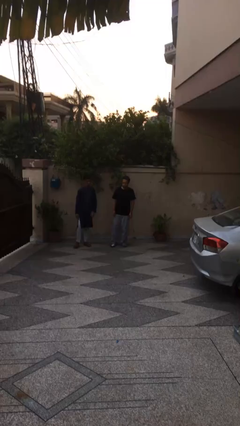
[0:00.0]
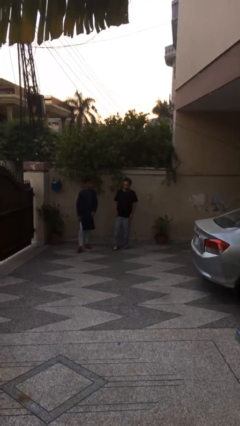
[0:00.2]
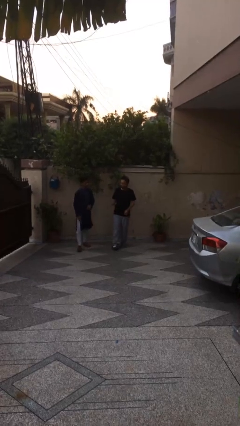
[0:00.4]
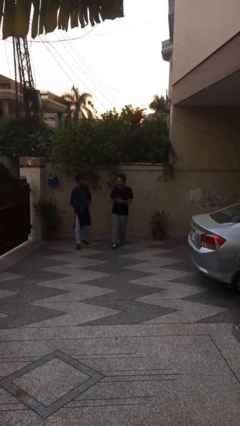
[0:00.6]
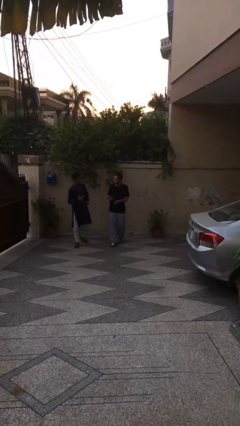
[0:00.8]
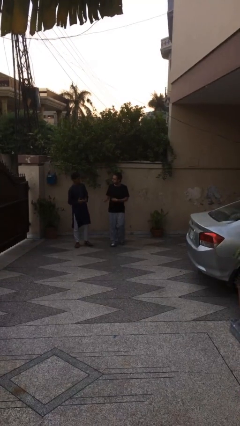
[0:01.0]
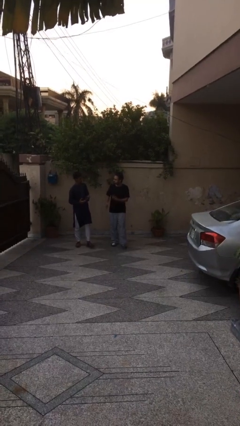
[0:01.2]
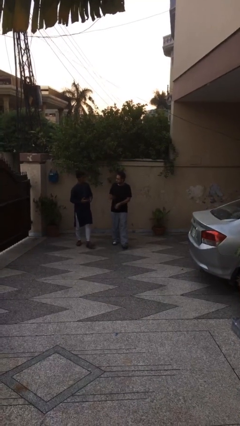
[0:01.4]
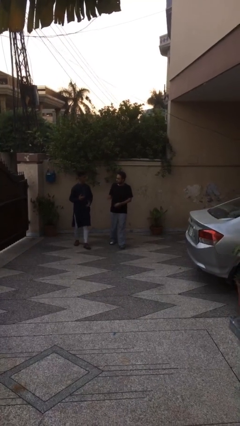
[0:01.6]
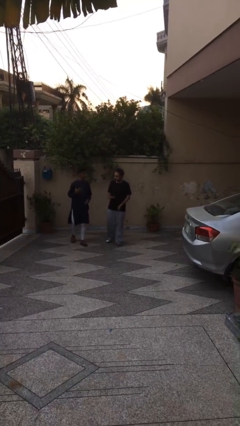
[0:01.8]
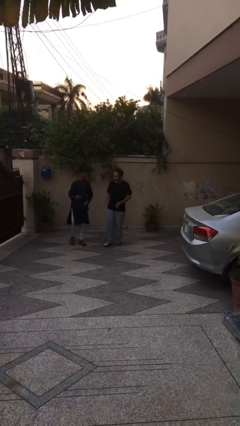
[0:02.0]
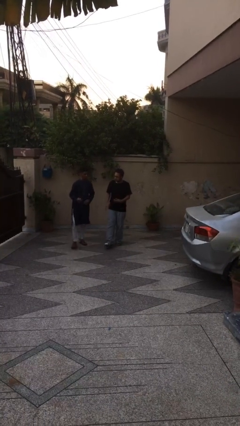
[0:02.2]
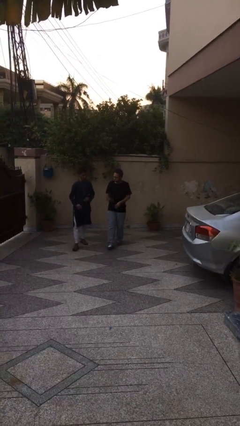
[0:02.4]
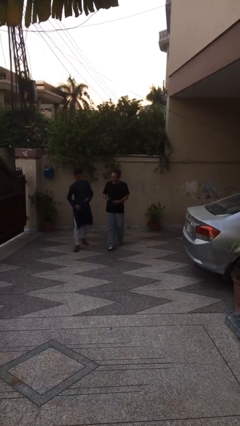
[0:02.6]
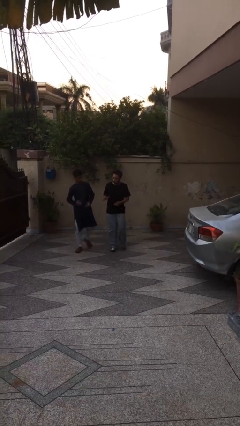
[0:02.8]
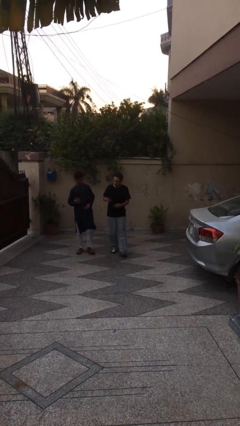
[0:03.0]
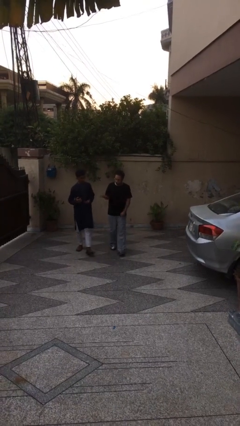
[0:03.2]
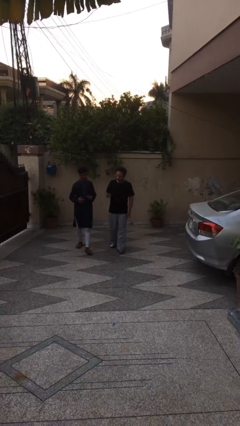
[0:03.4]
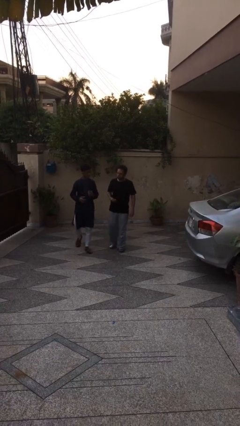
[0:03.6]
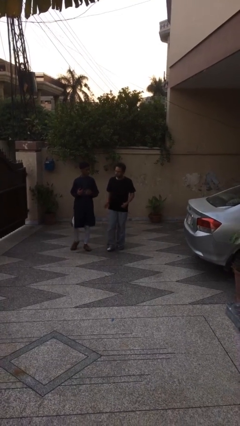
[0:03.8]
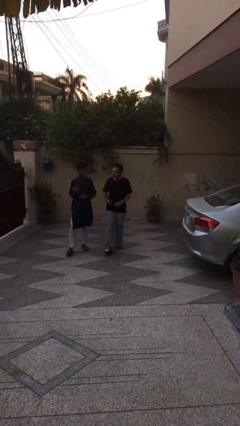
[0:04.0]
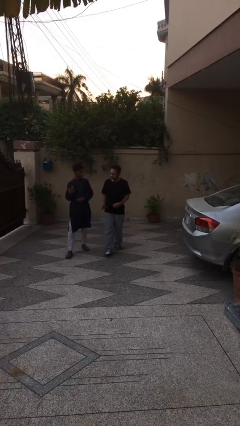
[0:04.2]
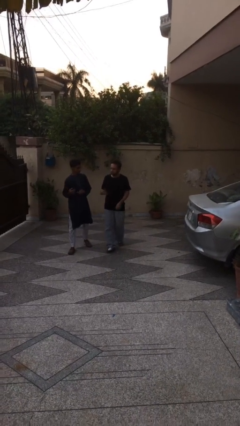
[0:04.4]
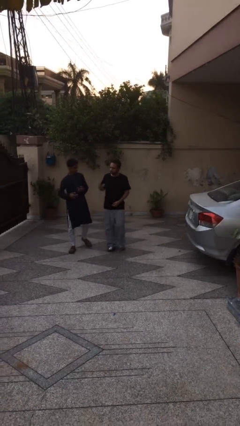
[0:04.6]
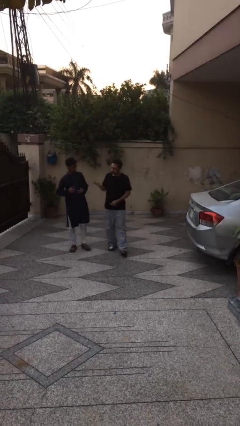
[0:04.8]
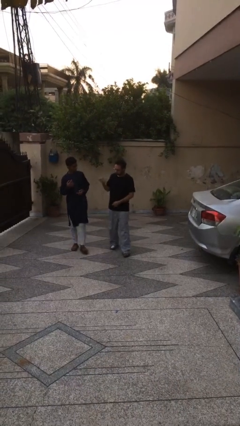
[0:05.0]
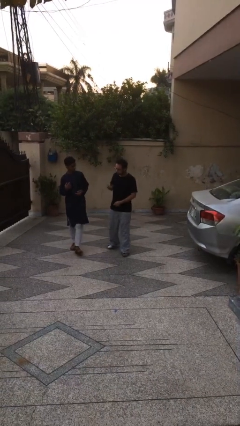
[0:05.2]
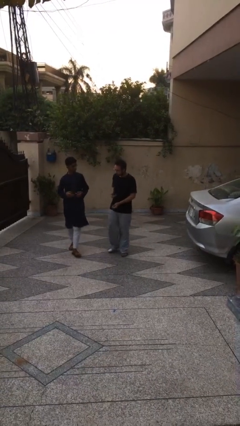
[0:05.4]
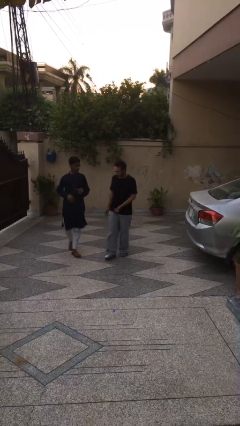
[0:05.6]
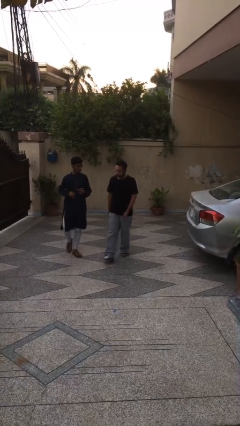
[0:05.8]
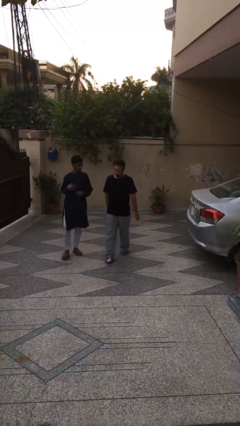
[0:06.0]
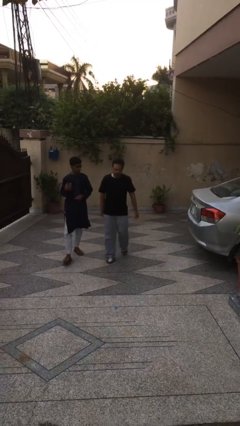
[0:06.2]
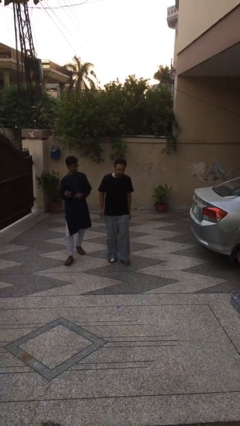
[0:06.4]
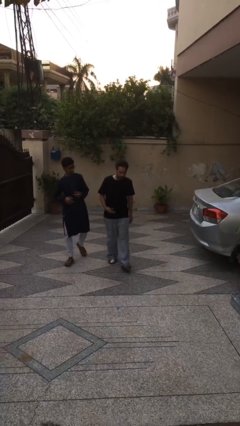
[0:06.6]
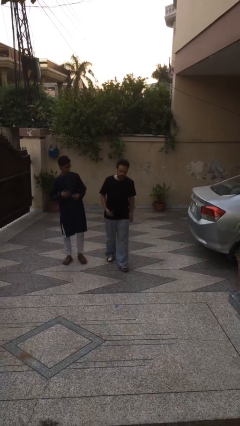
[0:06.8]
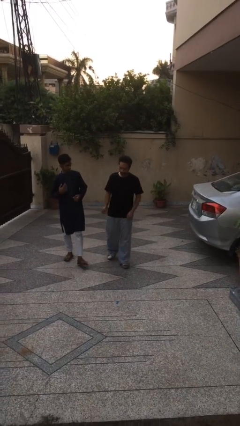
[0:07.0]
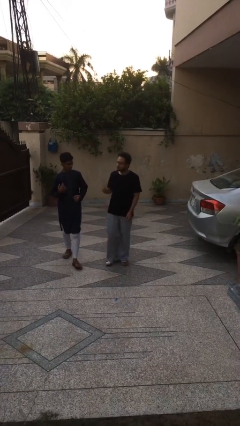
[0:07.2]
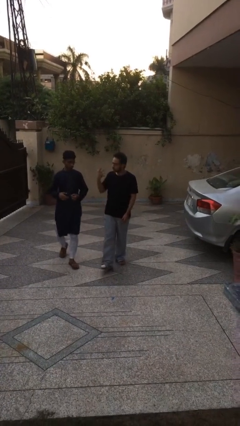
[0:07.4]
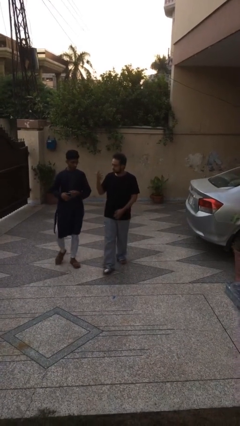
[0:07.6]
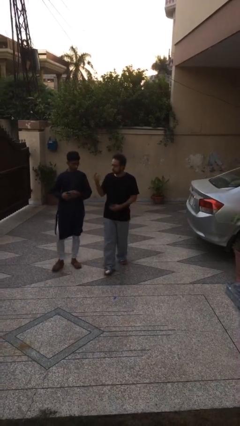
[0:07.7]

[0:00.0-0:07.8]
person talks to person

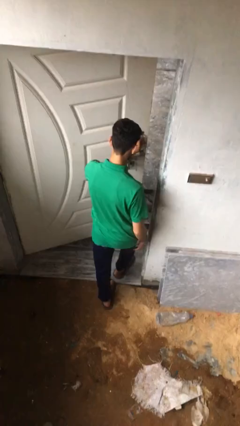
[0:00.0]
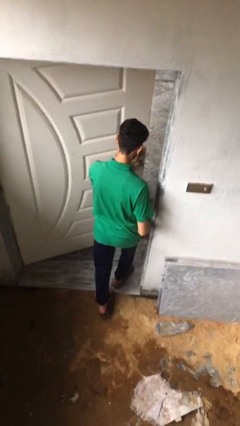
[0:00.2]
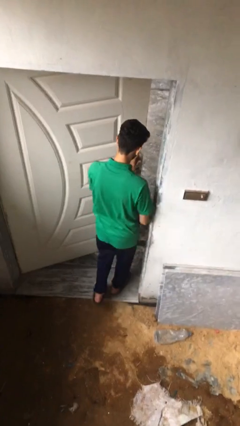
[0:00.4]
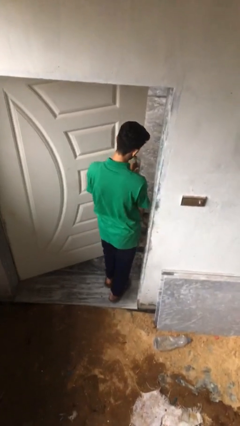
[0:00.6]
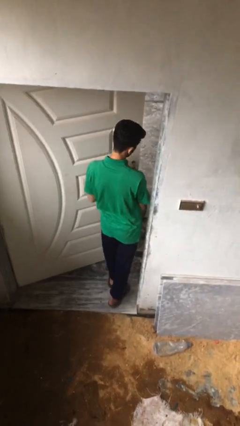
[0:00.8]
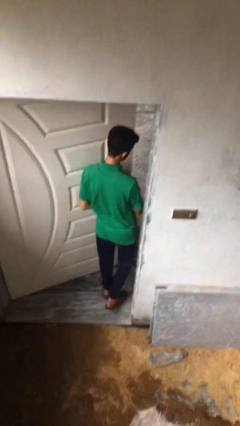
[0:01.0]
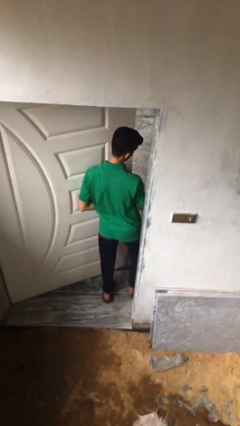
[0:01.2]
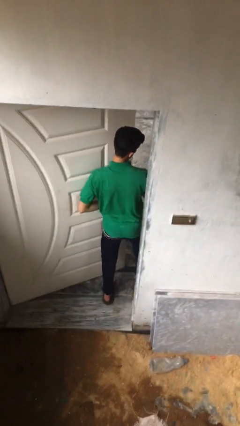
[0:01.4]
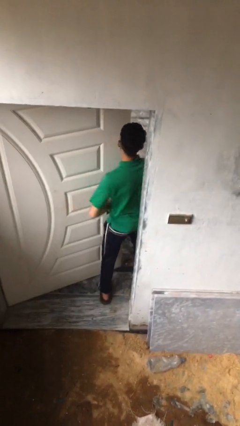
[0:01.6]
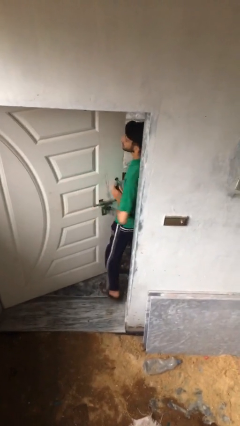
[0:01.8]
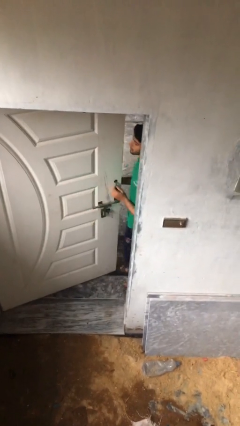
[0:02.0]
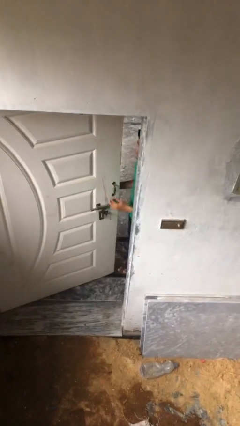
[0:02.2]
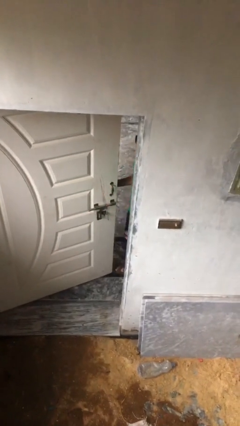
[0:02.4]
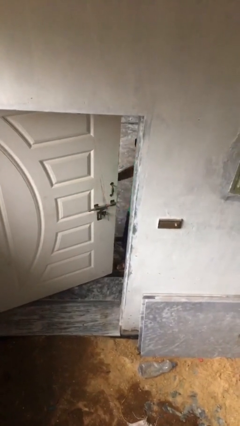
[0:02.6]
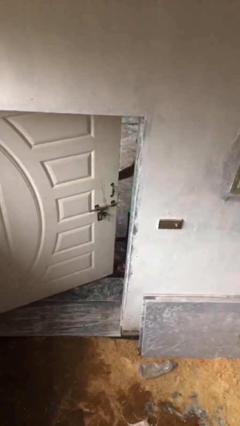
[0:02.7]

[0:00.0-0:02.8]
person exits scene through structure

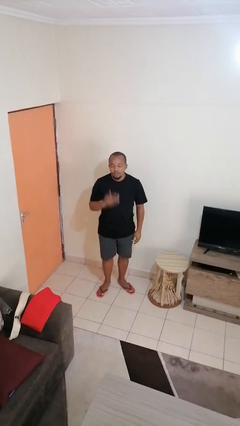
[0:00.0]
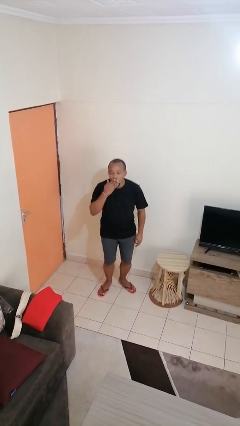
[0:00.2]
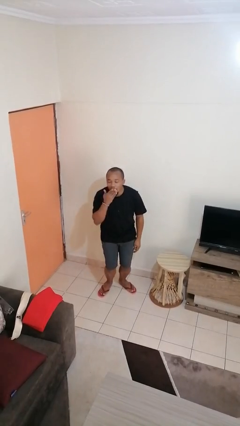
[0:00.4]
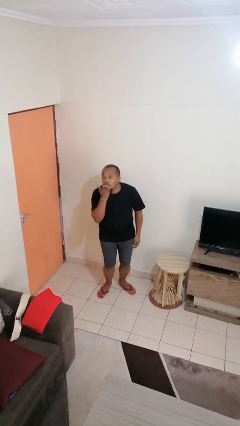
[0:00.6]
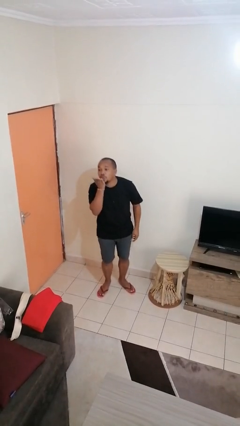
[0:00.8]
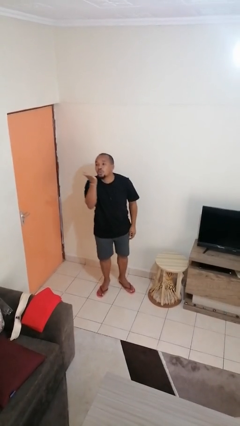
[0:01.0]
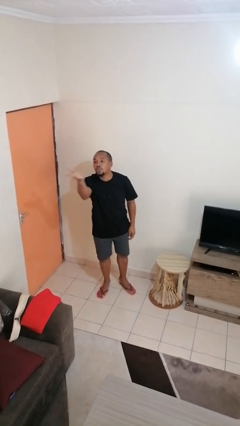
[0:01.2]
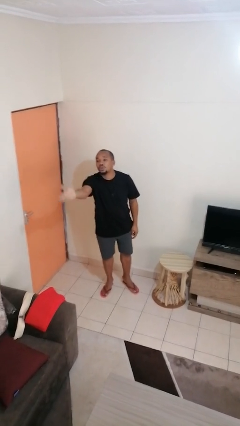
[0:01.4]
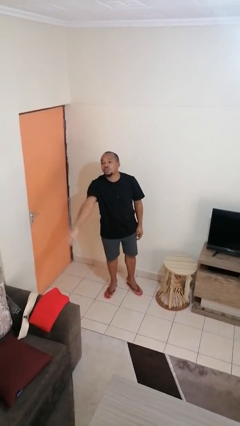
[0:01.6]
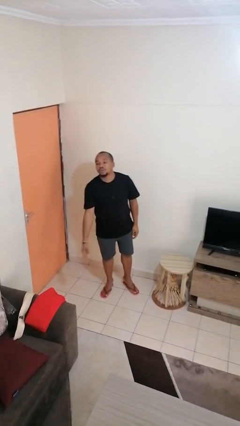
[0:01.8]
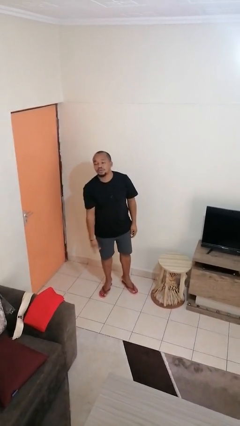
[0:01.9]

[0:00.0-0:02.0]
person gestures blow kiss

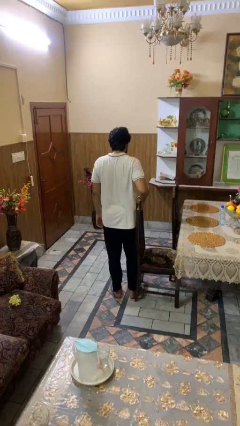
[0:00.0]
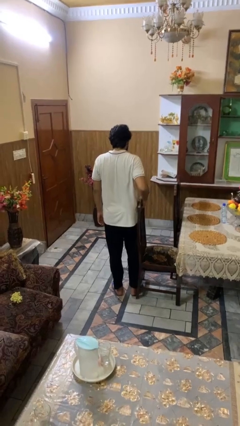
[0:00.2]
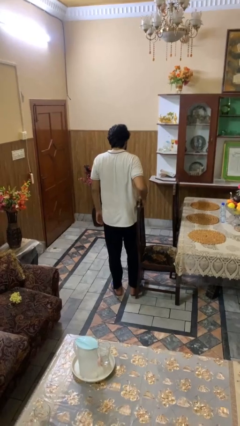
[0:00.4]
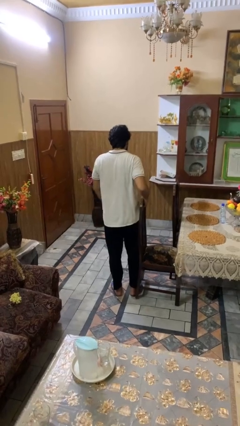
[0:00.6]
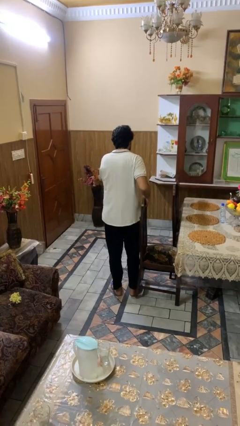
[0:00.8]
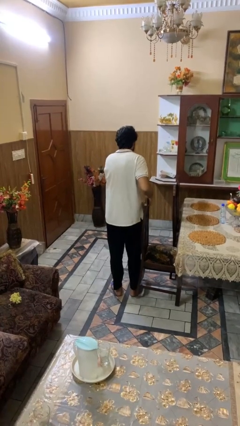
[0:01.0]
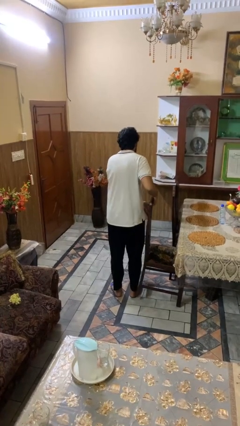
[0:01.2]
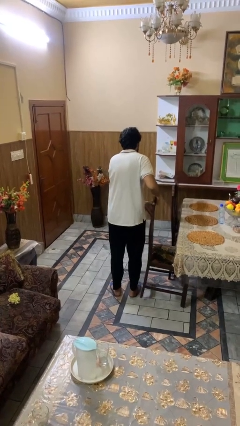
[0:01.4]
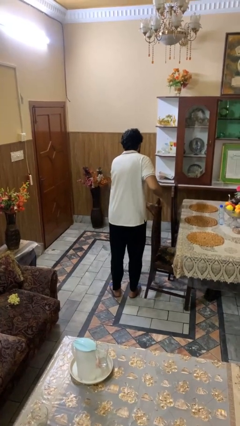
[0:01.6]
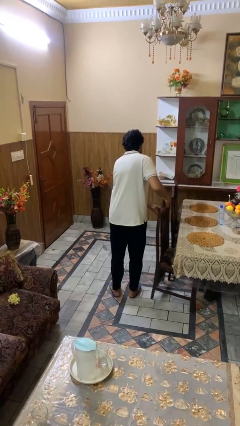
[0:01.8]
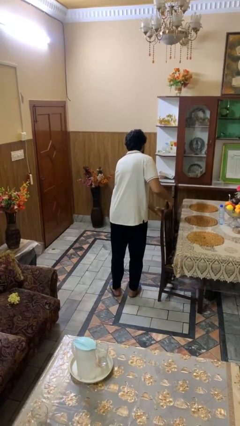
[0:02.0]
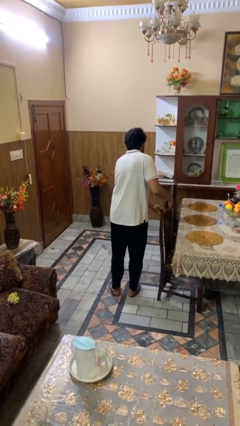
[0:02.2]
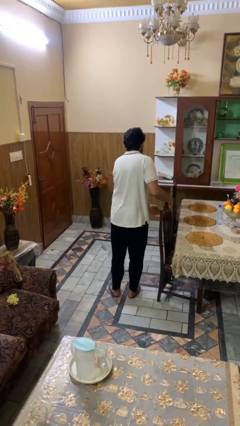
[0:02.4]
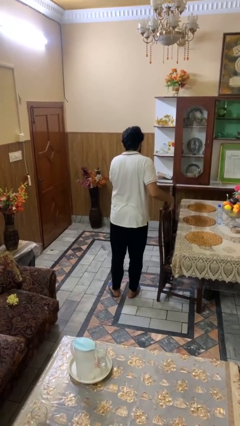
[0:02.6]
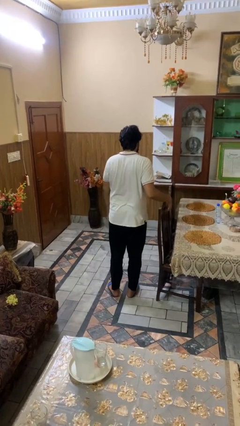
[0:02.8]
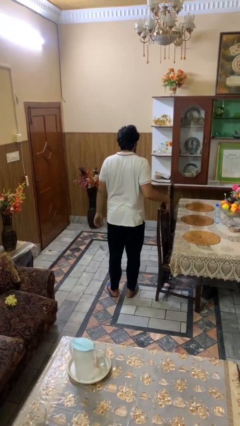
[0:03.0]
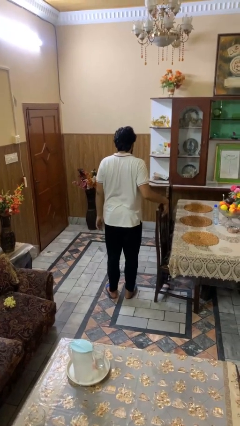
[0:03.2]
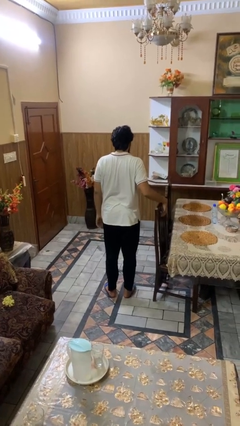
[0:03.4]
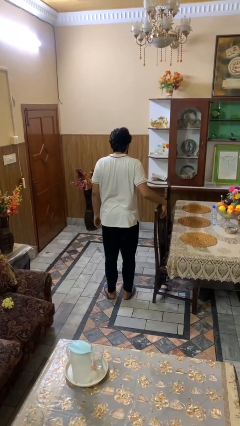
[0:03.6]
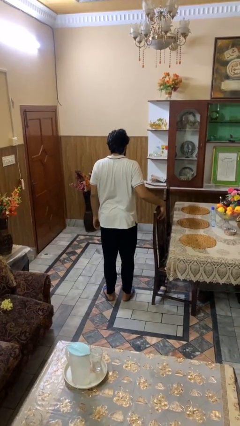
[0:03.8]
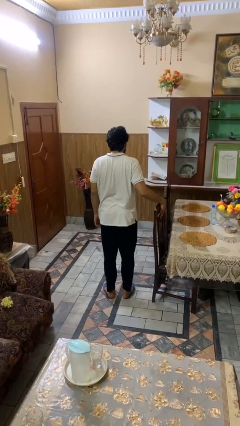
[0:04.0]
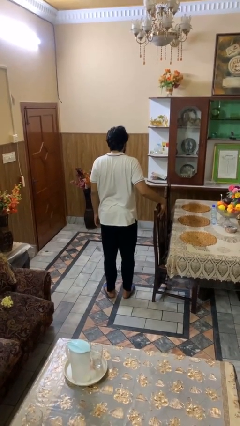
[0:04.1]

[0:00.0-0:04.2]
person pushes in chair

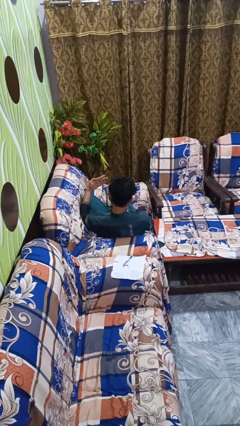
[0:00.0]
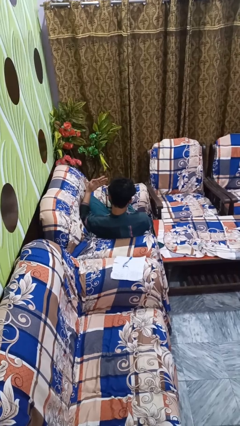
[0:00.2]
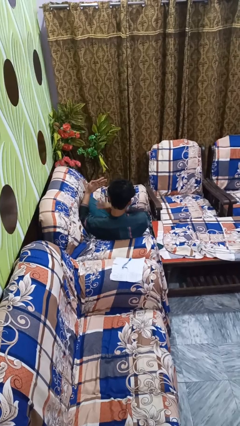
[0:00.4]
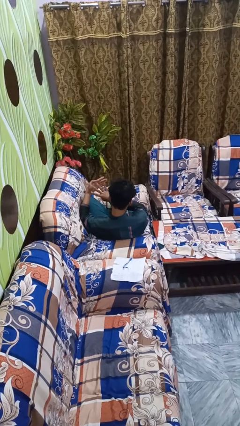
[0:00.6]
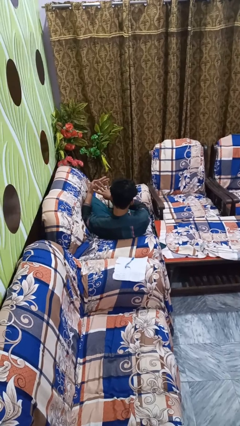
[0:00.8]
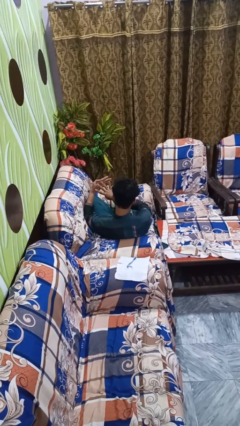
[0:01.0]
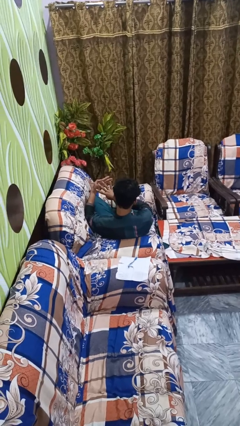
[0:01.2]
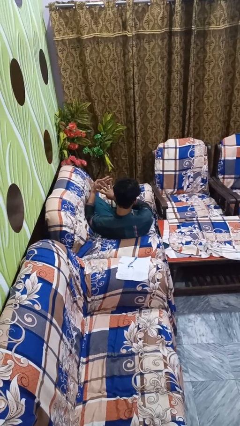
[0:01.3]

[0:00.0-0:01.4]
person gestures number four
